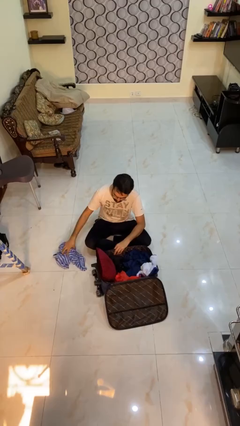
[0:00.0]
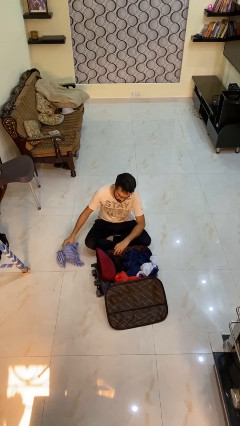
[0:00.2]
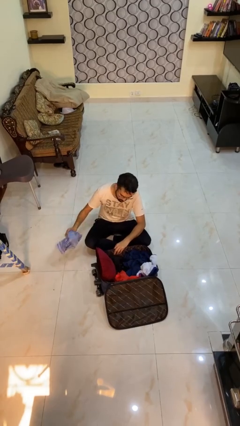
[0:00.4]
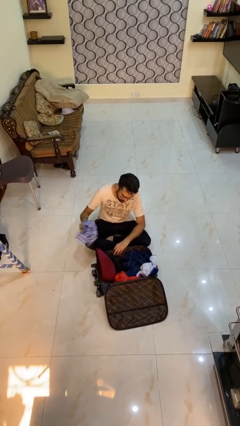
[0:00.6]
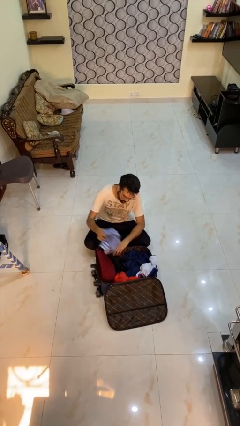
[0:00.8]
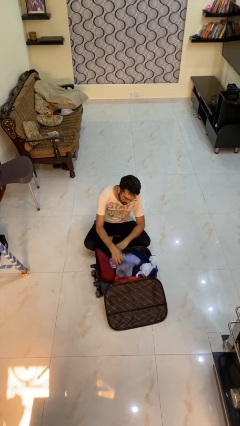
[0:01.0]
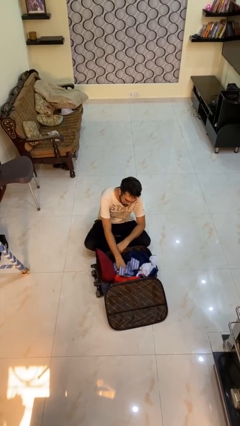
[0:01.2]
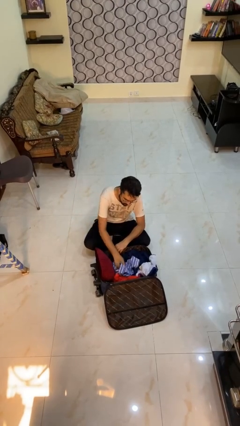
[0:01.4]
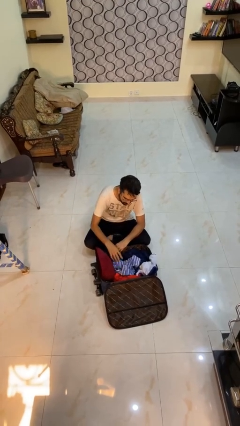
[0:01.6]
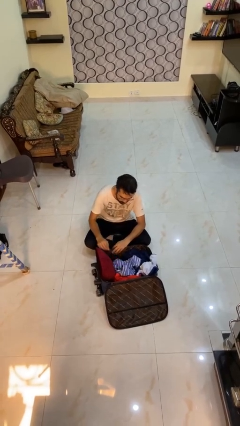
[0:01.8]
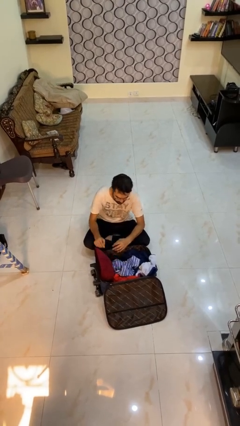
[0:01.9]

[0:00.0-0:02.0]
person loads clothes into suitcase

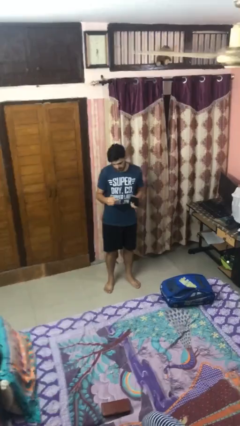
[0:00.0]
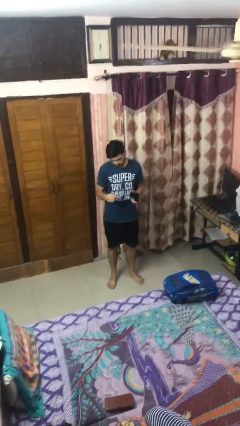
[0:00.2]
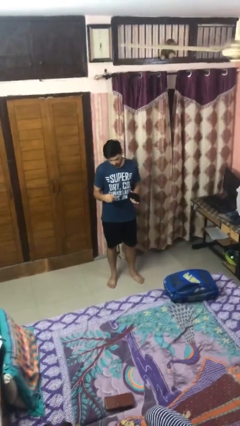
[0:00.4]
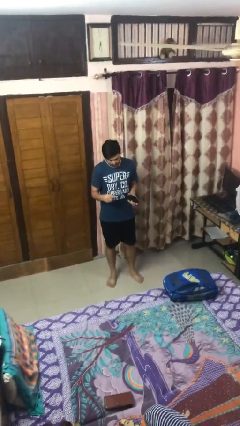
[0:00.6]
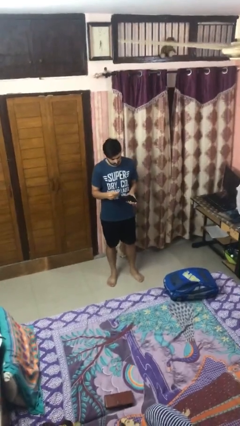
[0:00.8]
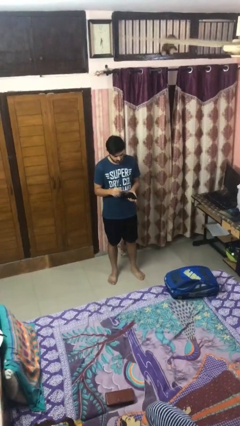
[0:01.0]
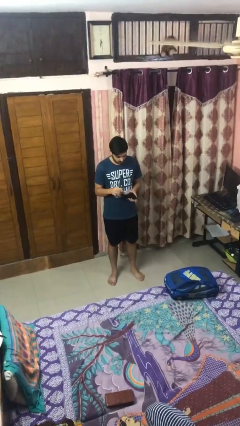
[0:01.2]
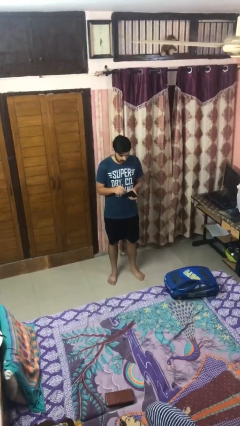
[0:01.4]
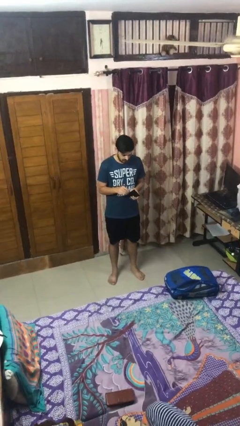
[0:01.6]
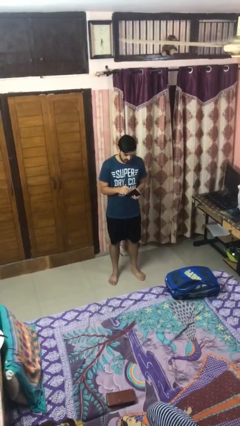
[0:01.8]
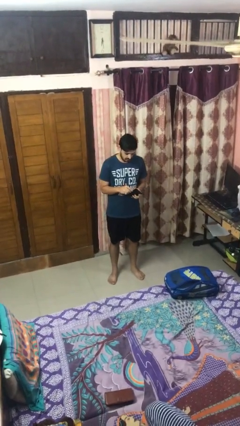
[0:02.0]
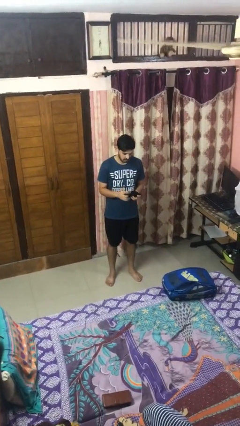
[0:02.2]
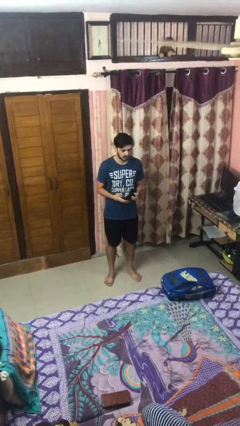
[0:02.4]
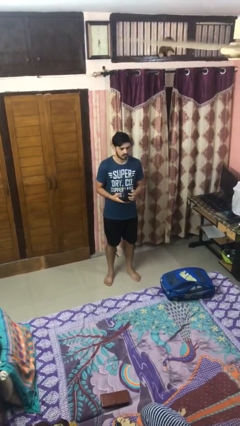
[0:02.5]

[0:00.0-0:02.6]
person puts object into purse

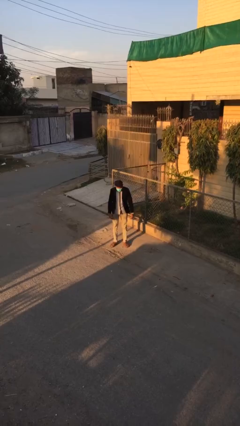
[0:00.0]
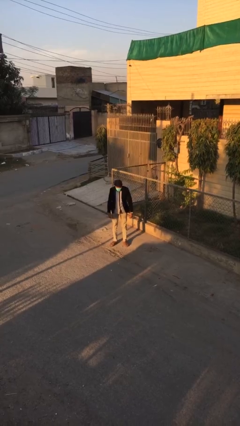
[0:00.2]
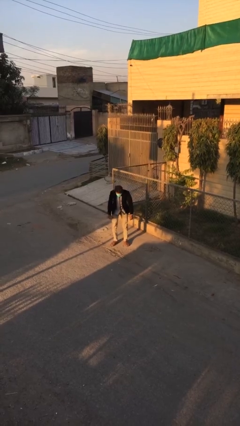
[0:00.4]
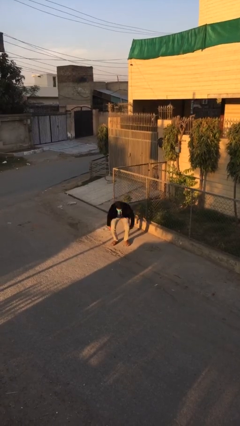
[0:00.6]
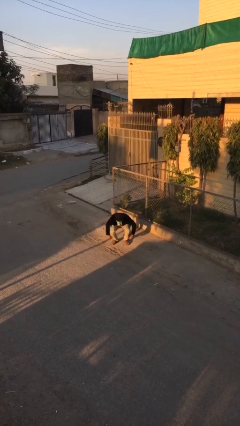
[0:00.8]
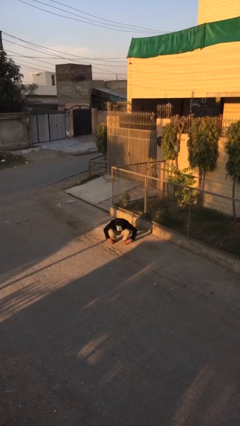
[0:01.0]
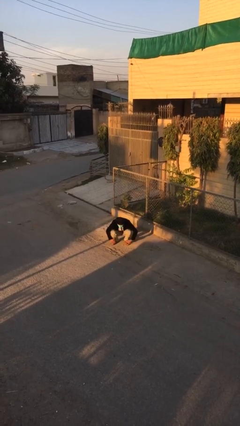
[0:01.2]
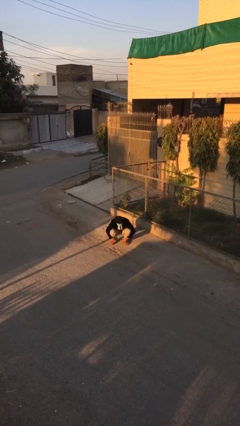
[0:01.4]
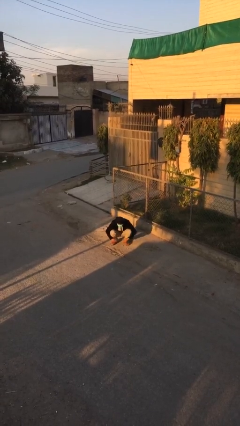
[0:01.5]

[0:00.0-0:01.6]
person sits down

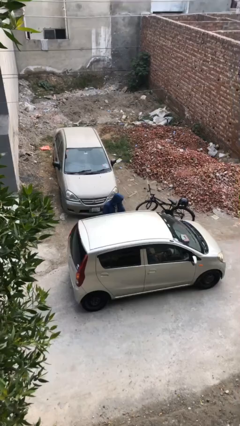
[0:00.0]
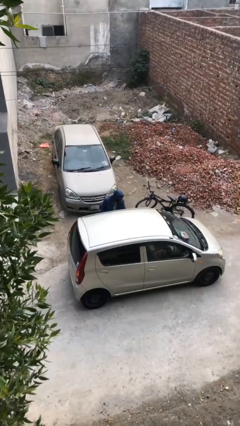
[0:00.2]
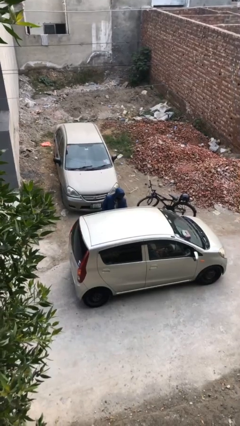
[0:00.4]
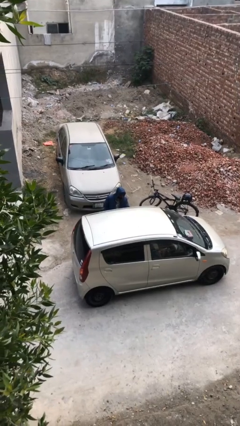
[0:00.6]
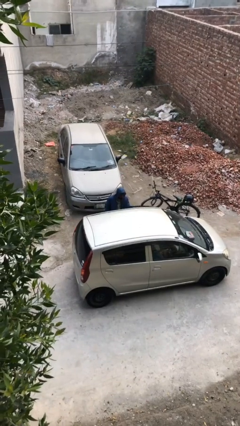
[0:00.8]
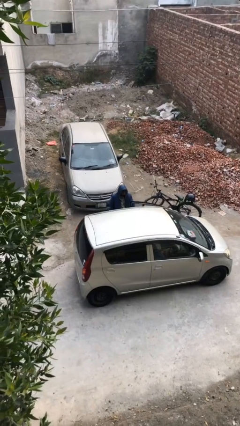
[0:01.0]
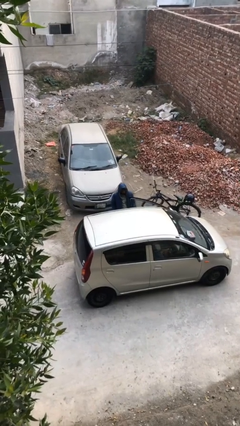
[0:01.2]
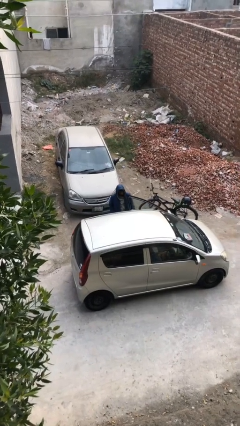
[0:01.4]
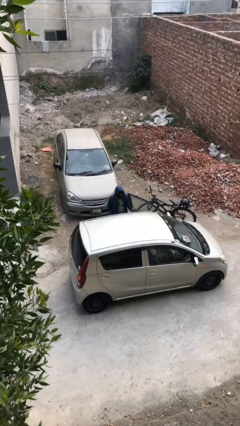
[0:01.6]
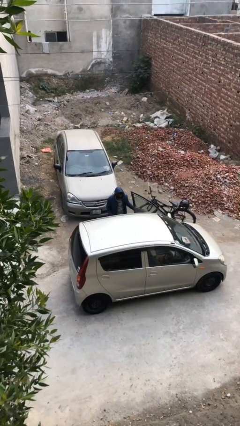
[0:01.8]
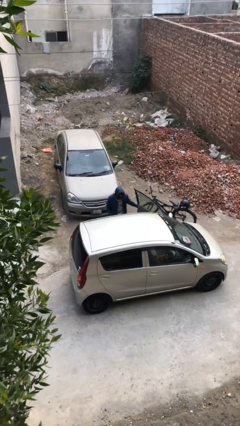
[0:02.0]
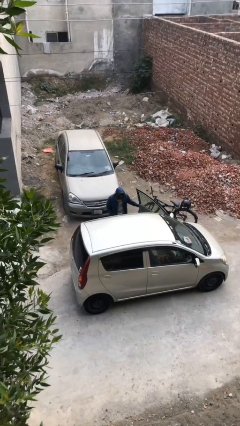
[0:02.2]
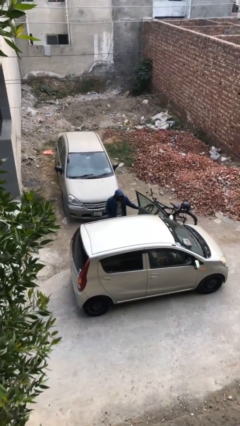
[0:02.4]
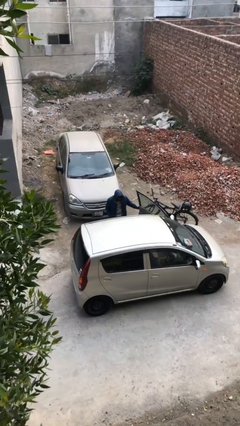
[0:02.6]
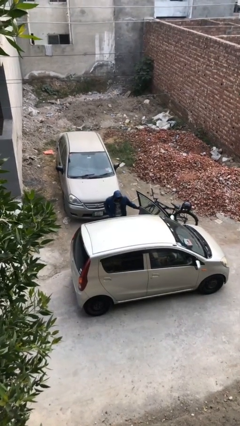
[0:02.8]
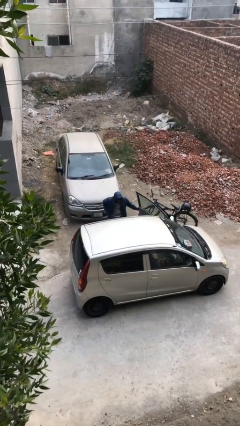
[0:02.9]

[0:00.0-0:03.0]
person opens car door

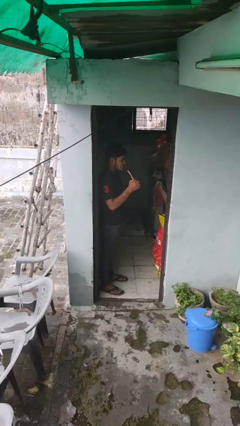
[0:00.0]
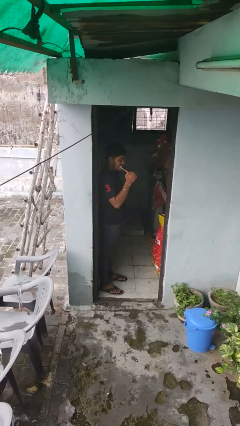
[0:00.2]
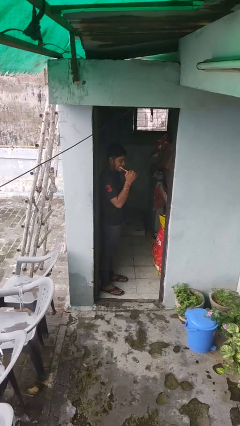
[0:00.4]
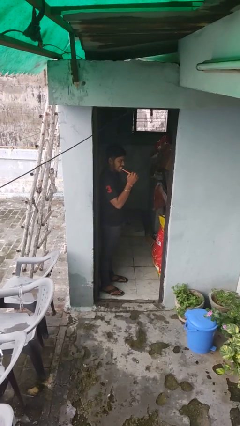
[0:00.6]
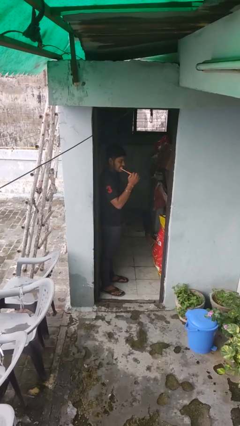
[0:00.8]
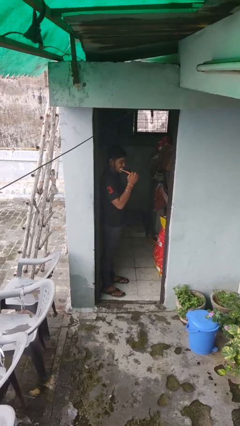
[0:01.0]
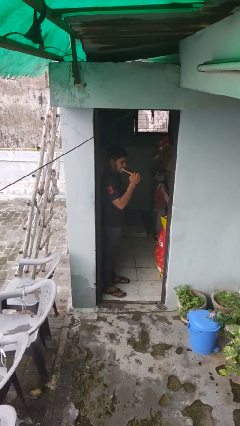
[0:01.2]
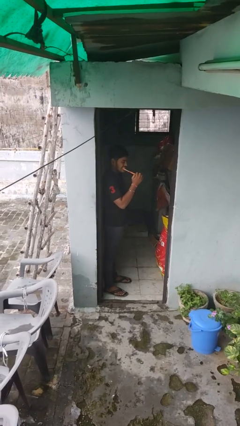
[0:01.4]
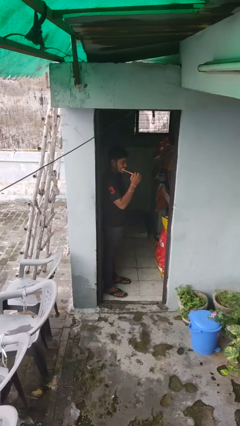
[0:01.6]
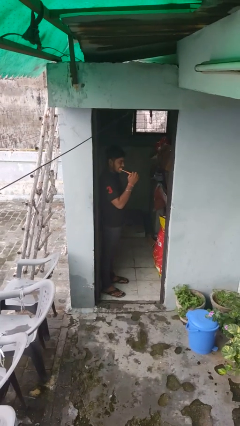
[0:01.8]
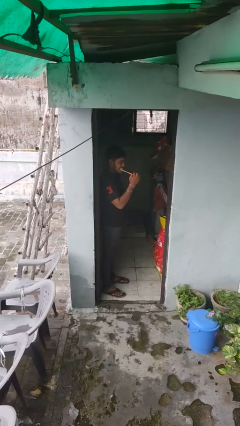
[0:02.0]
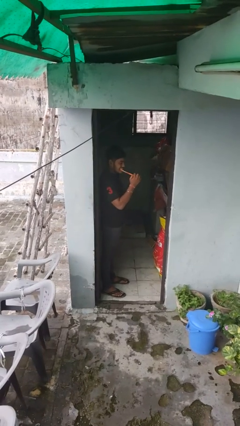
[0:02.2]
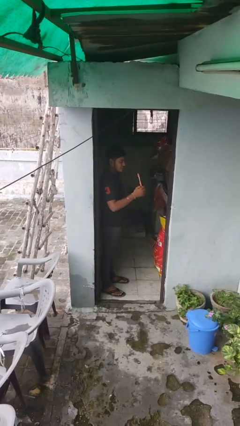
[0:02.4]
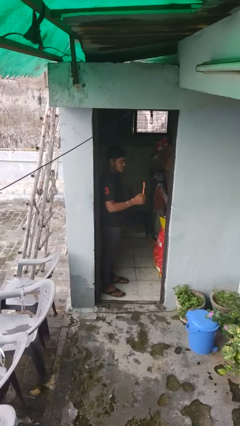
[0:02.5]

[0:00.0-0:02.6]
person brushes teeth

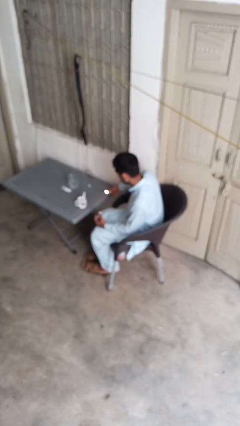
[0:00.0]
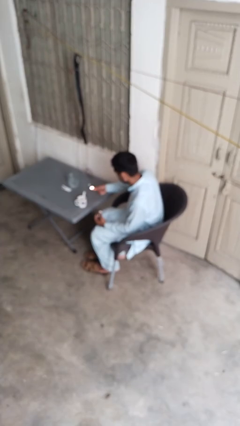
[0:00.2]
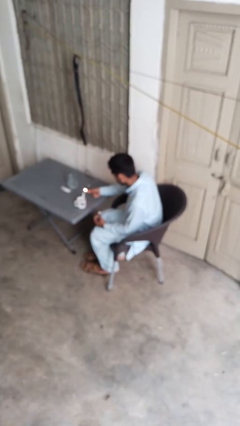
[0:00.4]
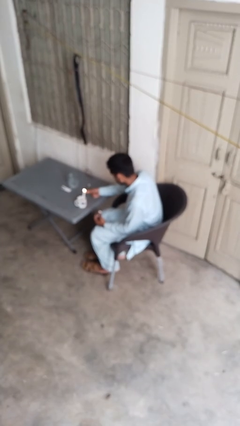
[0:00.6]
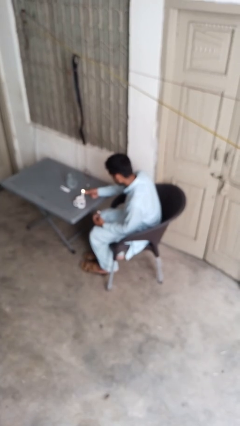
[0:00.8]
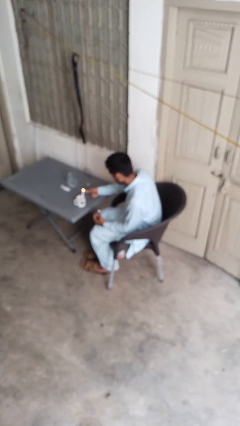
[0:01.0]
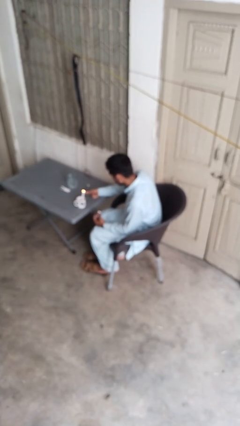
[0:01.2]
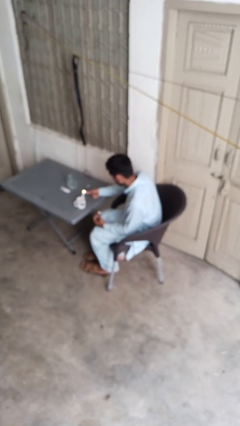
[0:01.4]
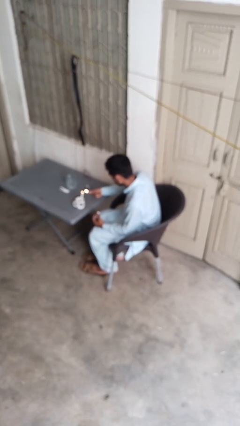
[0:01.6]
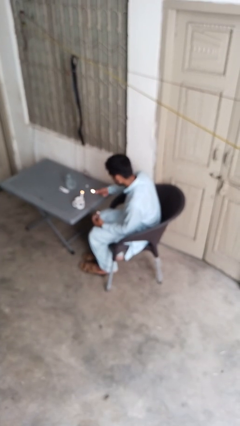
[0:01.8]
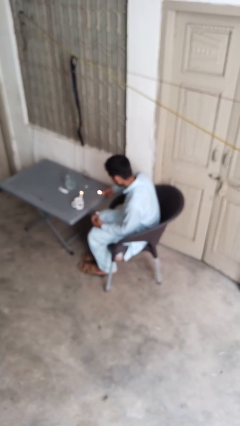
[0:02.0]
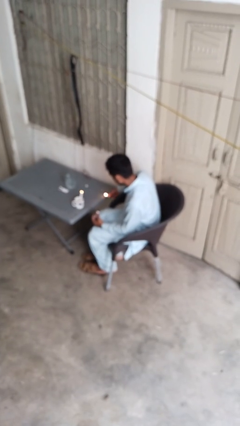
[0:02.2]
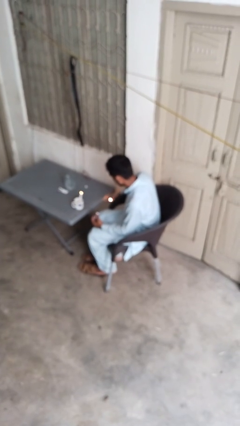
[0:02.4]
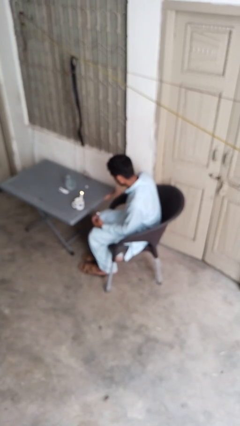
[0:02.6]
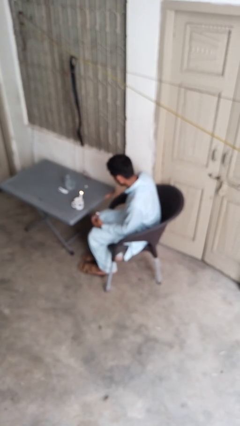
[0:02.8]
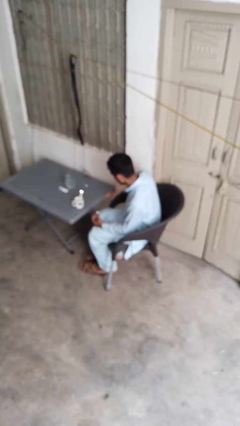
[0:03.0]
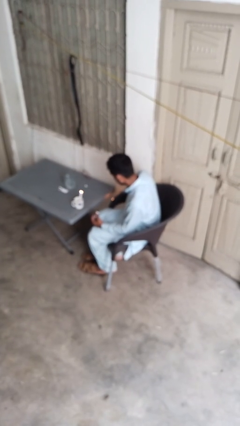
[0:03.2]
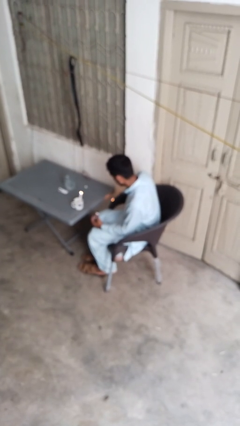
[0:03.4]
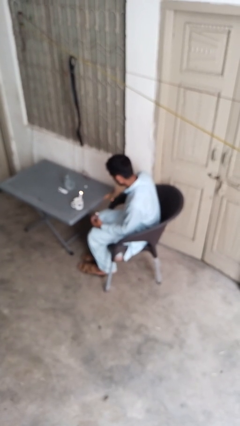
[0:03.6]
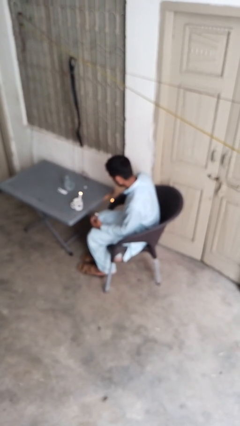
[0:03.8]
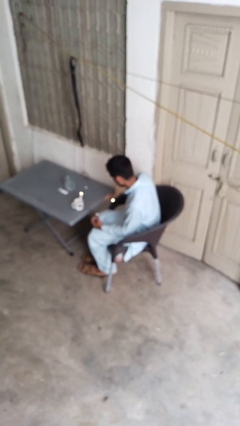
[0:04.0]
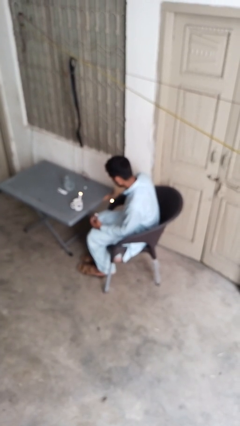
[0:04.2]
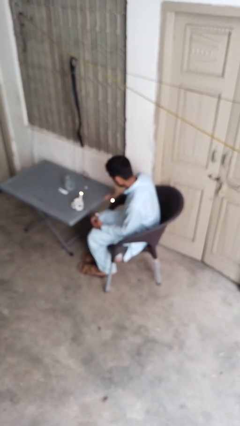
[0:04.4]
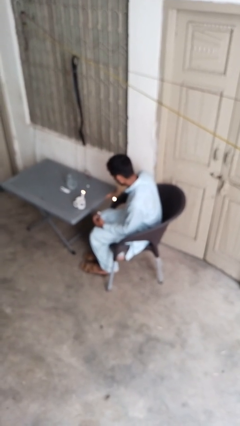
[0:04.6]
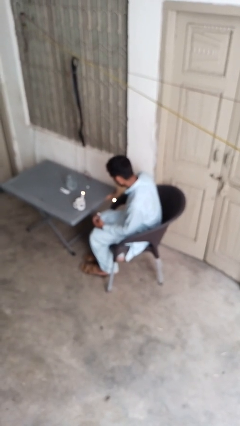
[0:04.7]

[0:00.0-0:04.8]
person lights candle

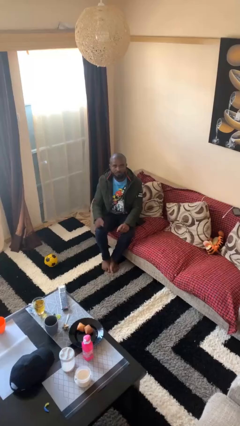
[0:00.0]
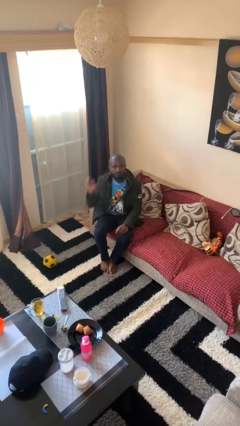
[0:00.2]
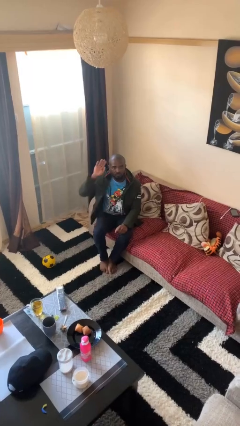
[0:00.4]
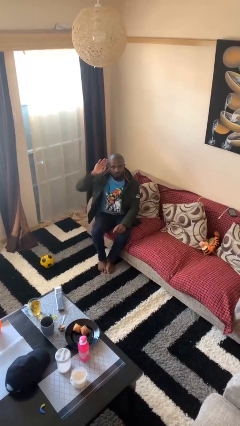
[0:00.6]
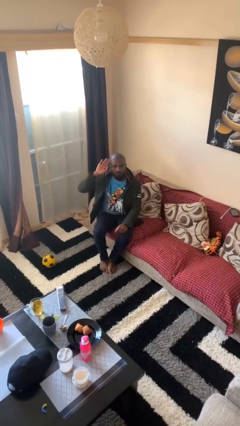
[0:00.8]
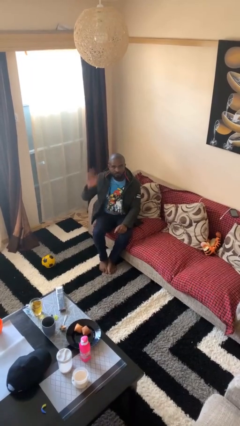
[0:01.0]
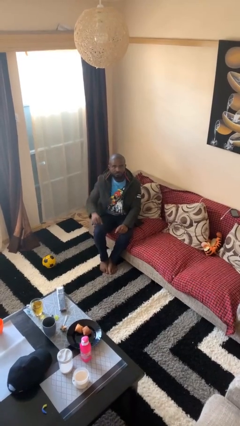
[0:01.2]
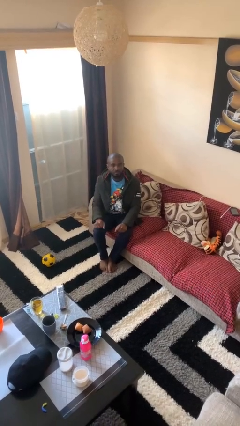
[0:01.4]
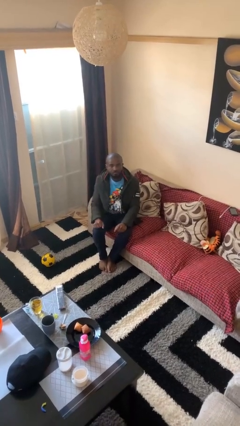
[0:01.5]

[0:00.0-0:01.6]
person salutes
